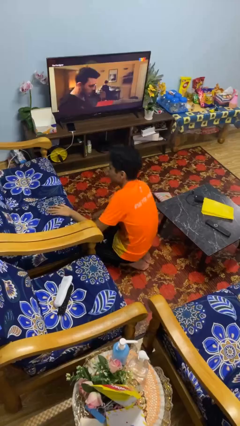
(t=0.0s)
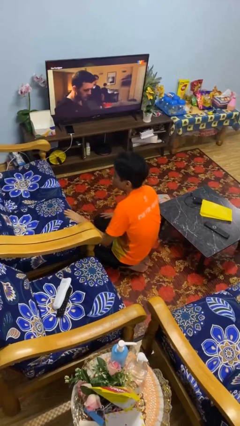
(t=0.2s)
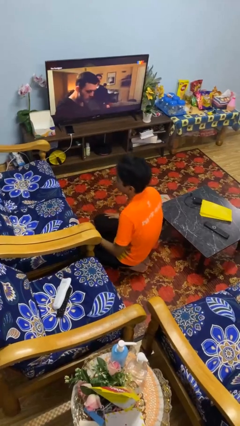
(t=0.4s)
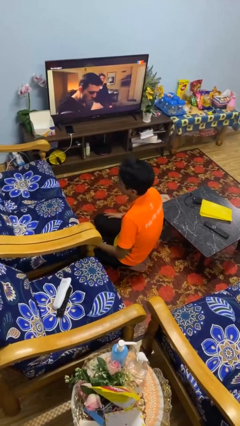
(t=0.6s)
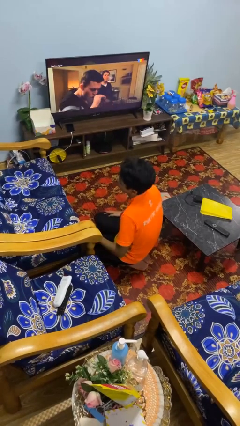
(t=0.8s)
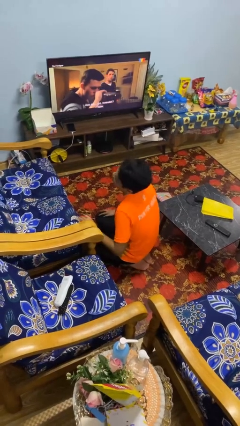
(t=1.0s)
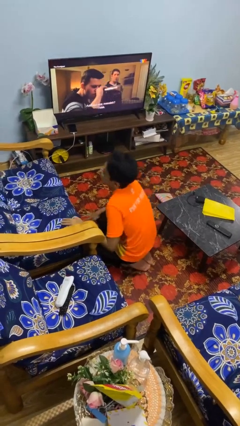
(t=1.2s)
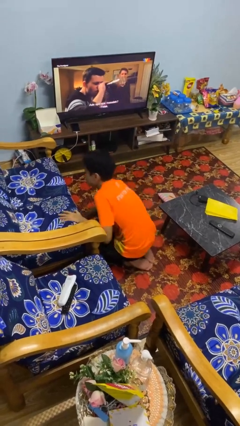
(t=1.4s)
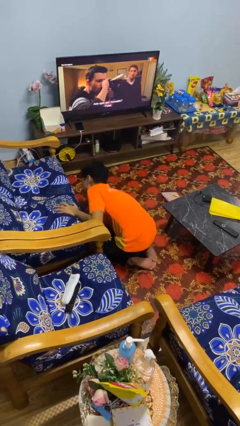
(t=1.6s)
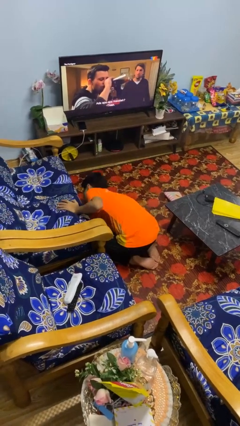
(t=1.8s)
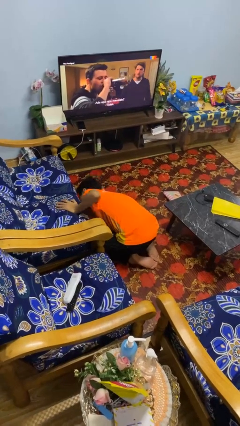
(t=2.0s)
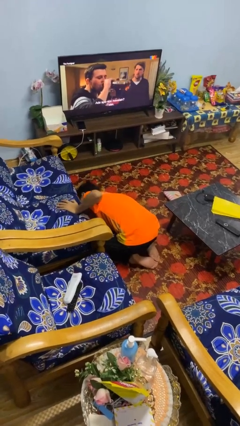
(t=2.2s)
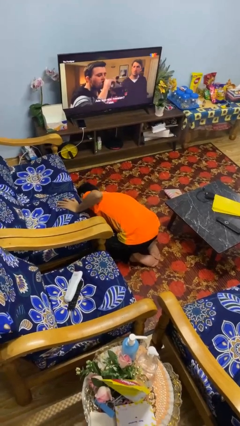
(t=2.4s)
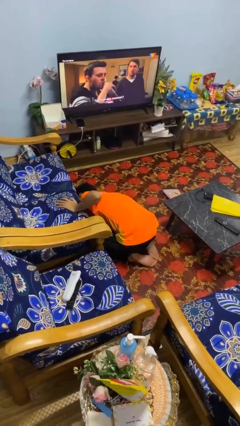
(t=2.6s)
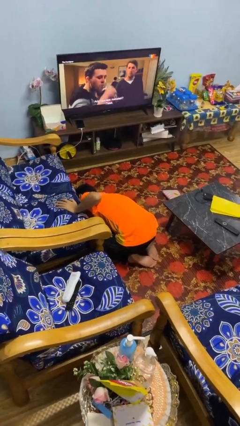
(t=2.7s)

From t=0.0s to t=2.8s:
person searches under couch

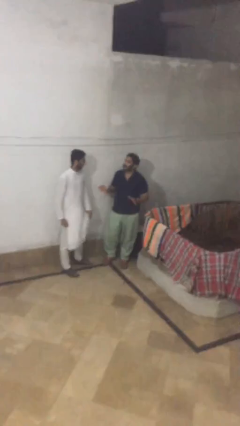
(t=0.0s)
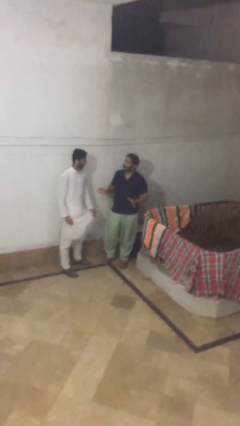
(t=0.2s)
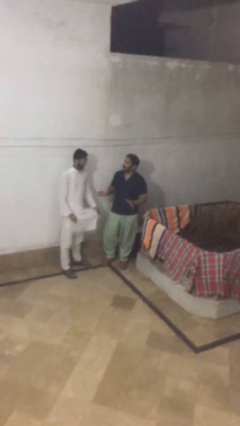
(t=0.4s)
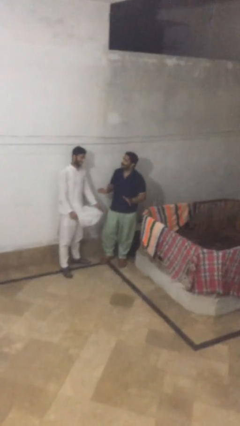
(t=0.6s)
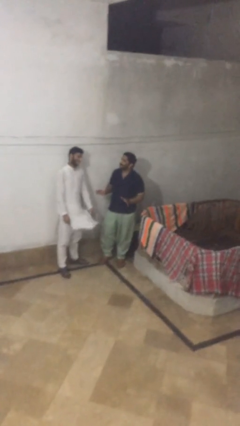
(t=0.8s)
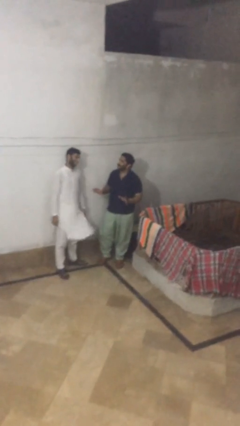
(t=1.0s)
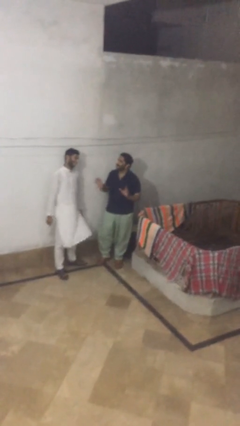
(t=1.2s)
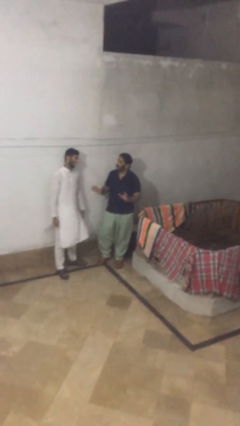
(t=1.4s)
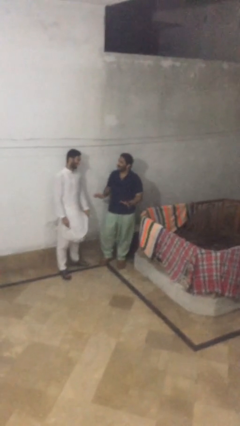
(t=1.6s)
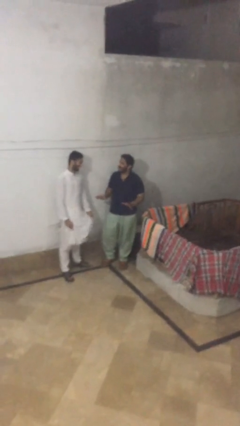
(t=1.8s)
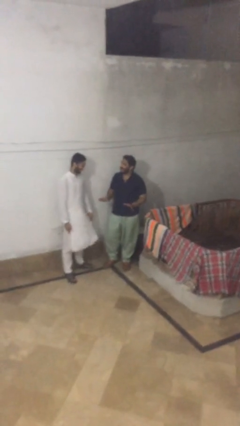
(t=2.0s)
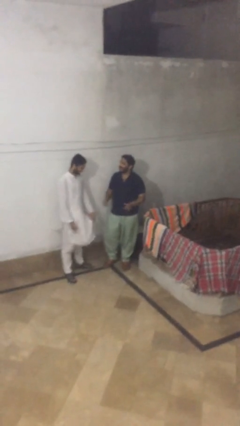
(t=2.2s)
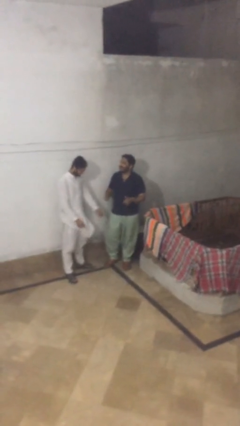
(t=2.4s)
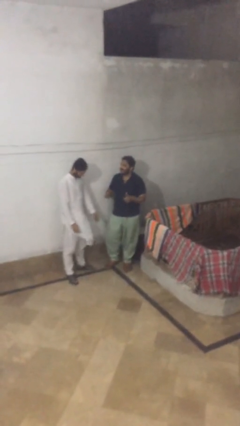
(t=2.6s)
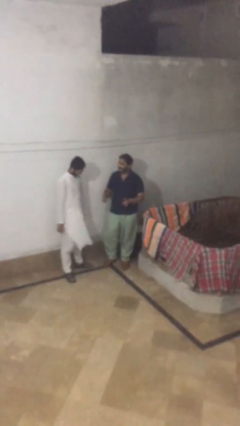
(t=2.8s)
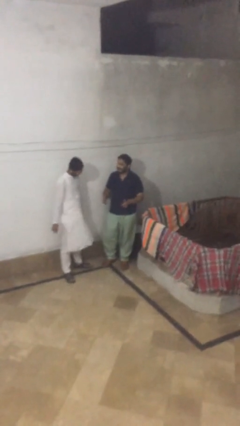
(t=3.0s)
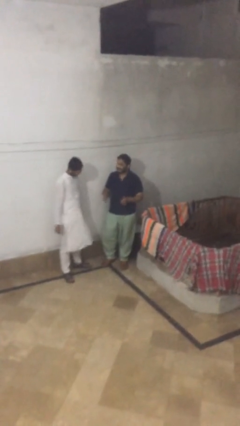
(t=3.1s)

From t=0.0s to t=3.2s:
person talks to person

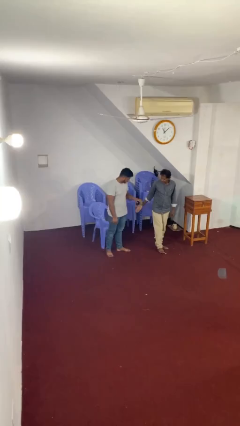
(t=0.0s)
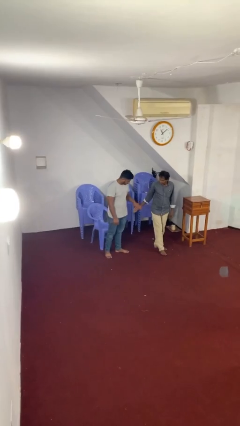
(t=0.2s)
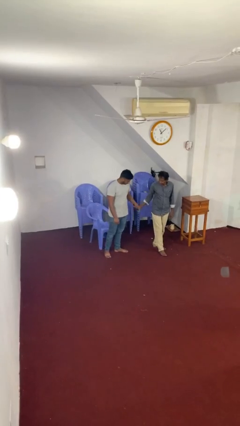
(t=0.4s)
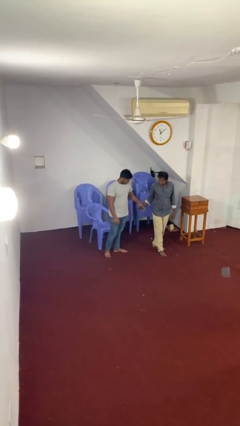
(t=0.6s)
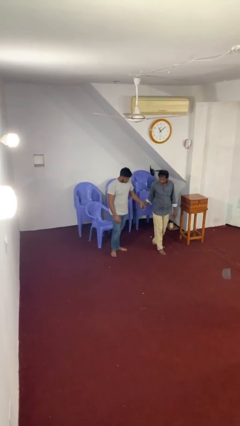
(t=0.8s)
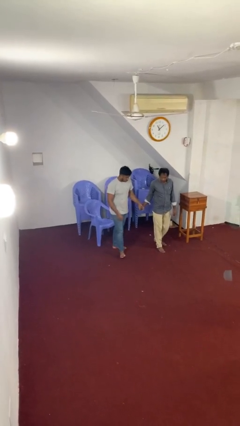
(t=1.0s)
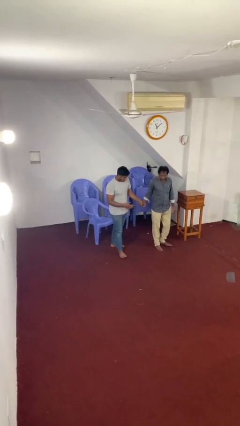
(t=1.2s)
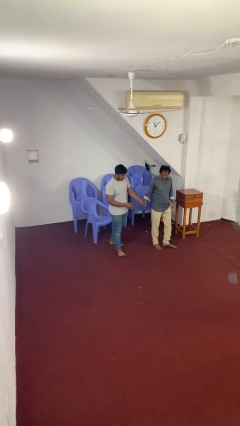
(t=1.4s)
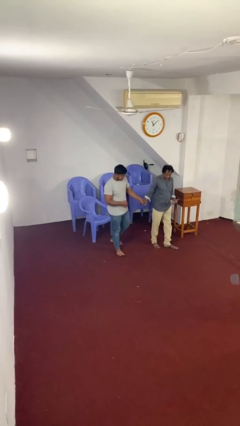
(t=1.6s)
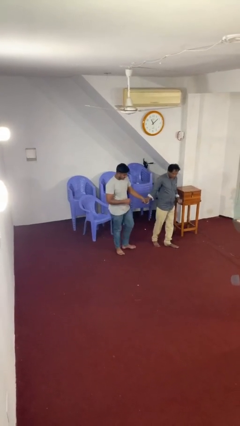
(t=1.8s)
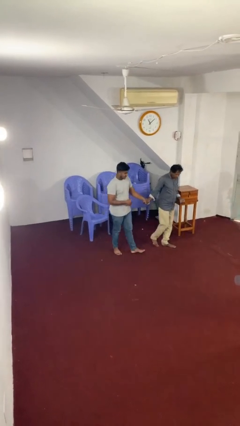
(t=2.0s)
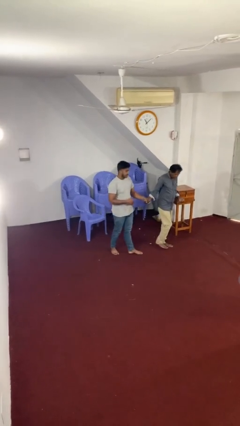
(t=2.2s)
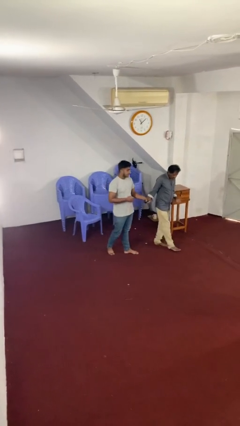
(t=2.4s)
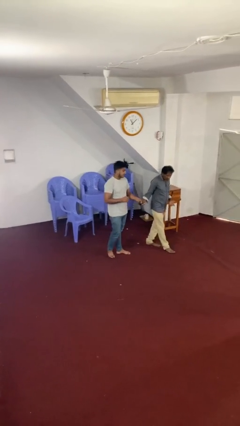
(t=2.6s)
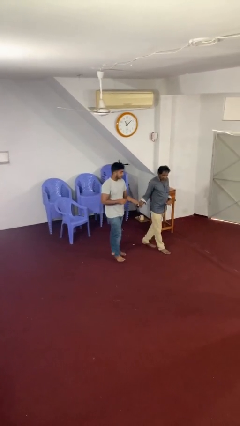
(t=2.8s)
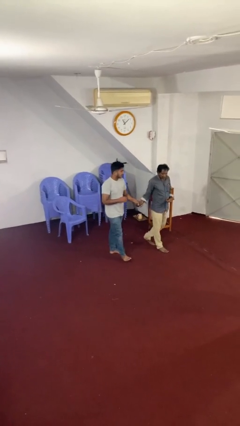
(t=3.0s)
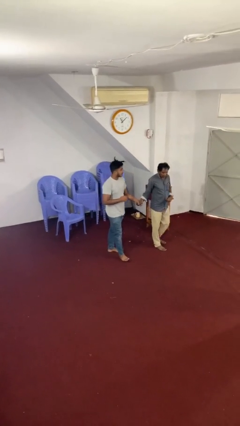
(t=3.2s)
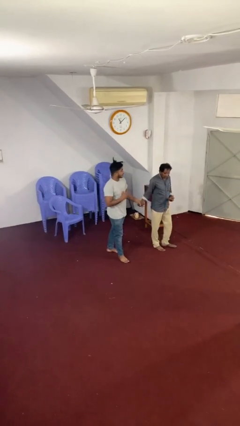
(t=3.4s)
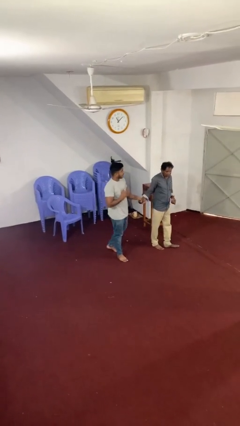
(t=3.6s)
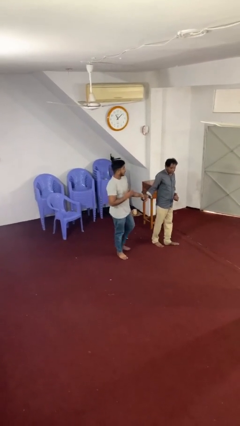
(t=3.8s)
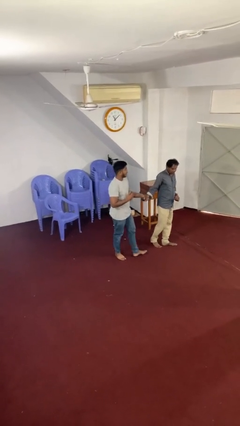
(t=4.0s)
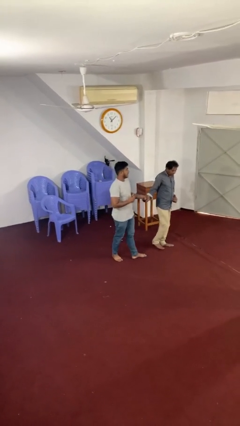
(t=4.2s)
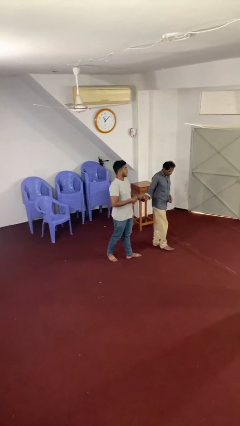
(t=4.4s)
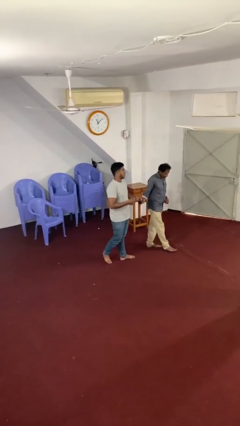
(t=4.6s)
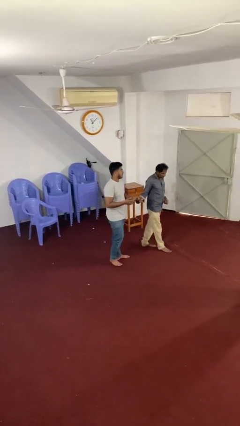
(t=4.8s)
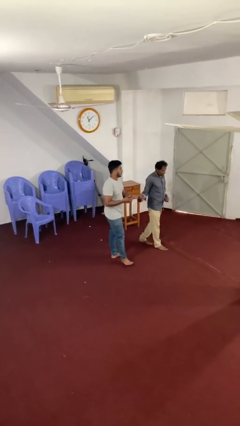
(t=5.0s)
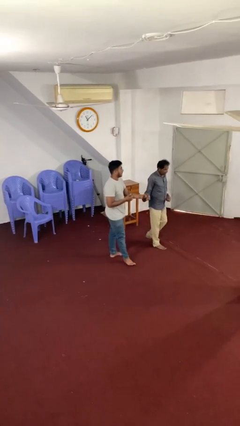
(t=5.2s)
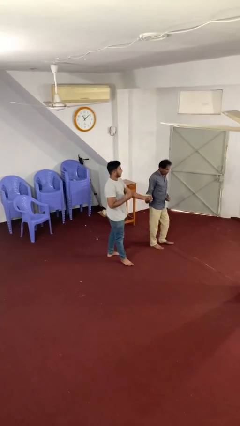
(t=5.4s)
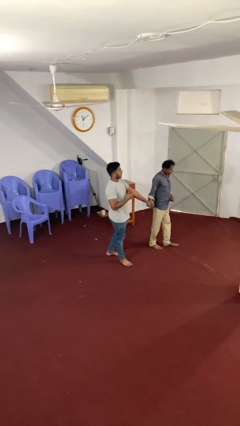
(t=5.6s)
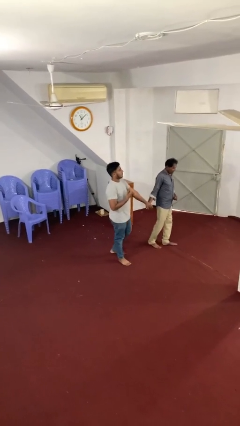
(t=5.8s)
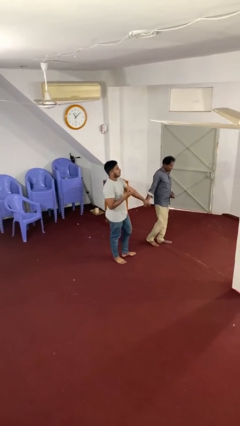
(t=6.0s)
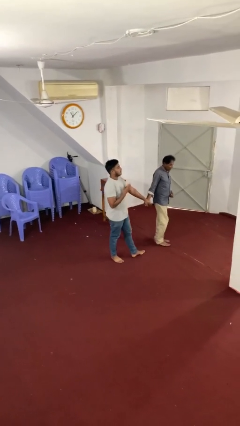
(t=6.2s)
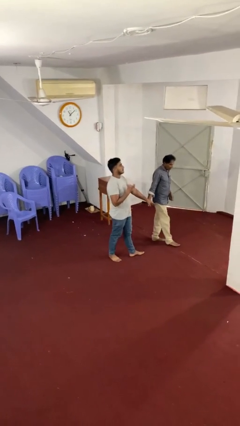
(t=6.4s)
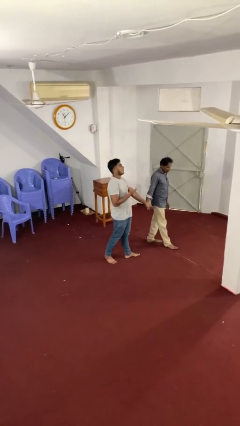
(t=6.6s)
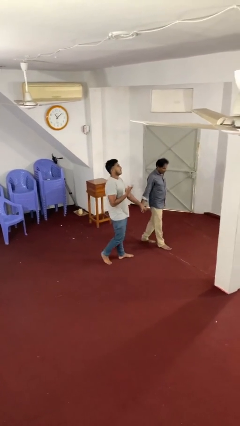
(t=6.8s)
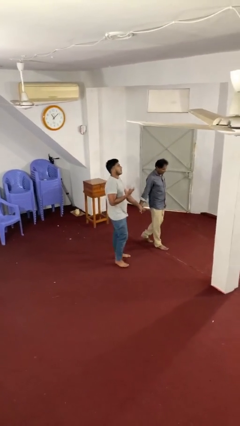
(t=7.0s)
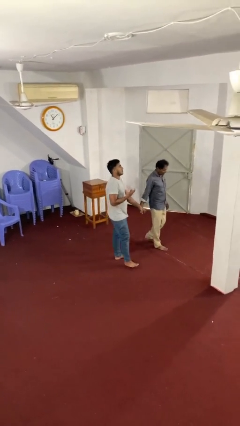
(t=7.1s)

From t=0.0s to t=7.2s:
person holds hand

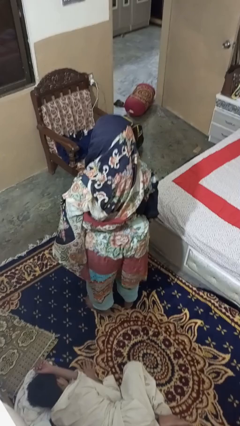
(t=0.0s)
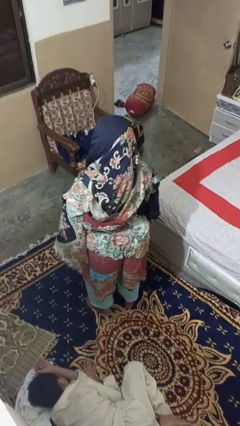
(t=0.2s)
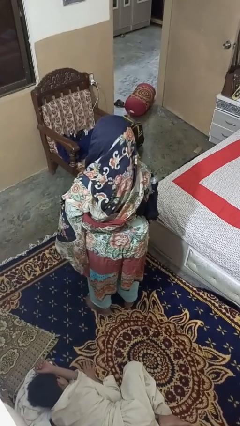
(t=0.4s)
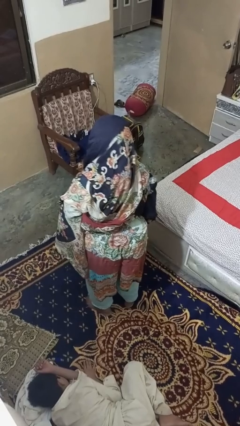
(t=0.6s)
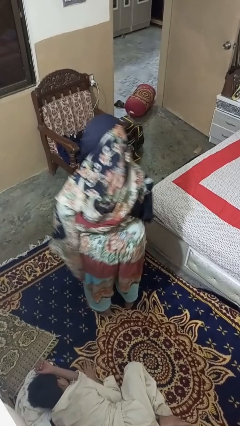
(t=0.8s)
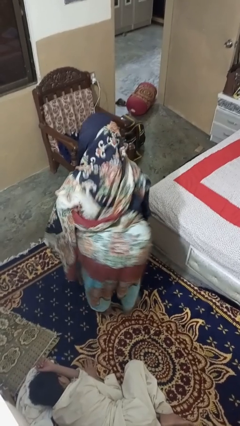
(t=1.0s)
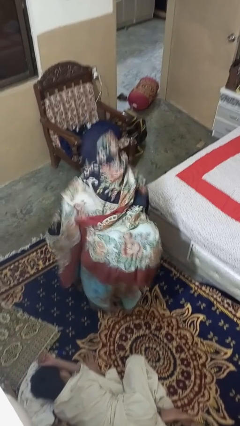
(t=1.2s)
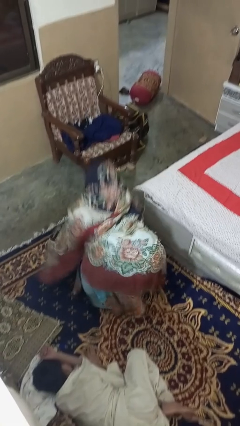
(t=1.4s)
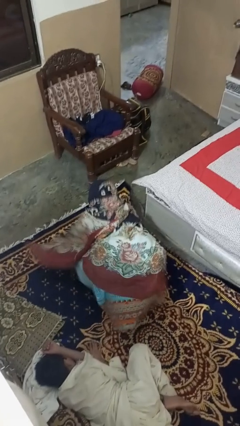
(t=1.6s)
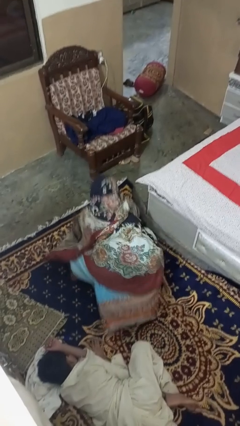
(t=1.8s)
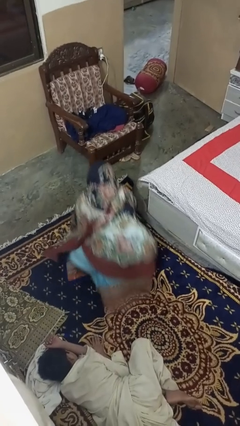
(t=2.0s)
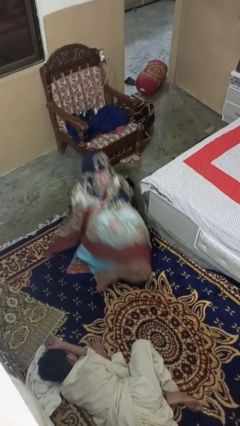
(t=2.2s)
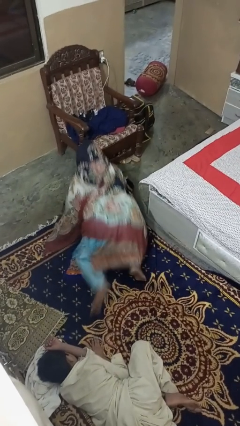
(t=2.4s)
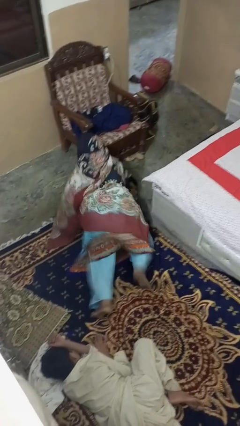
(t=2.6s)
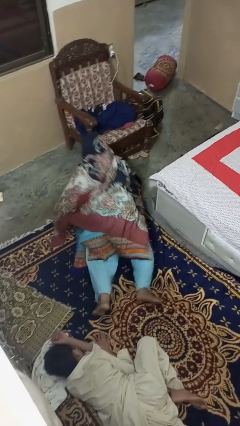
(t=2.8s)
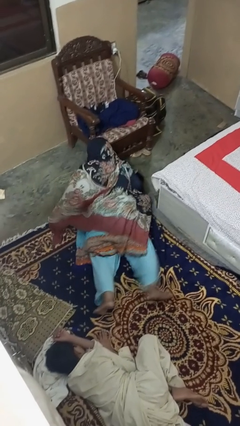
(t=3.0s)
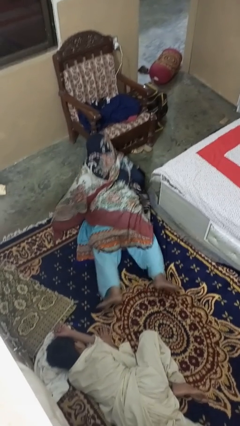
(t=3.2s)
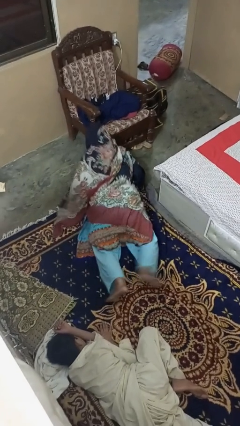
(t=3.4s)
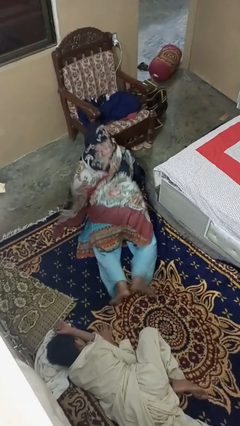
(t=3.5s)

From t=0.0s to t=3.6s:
person exercises with pushup

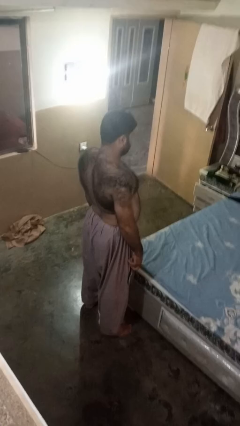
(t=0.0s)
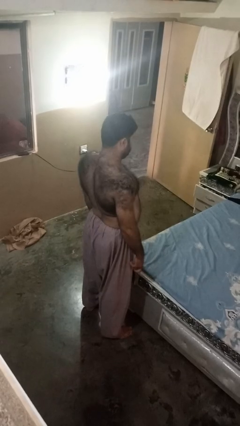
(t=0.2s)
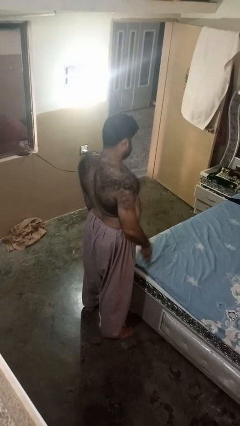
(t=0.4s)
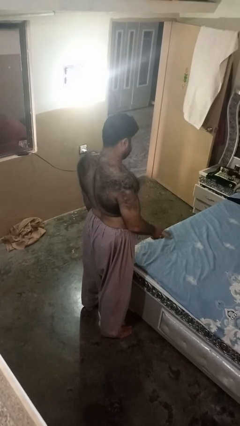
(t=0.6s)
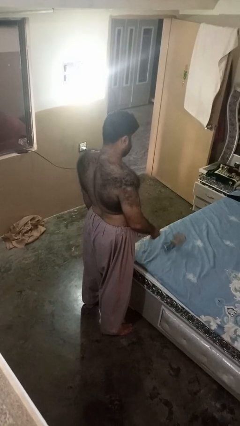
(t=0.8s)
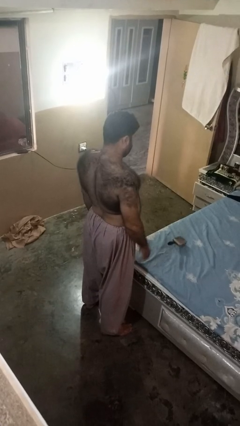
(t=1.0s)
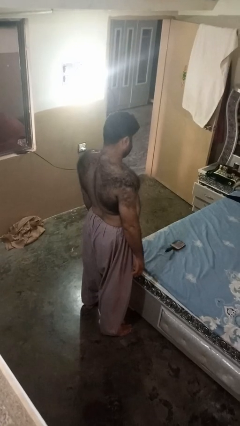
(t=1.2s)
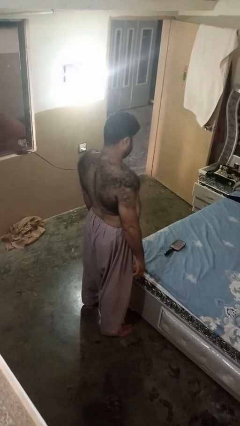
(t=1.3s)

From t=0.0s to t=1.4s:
person throws object on bed
